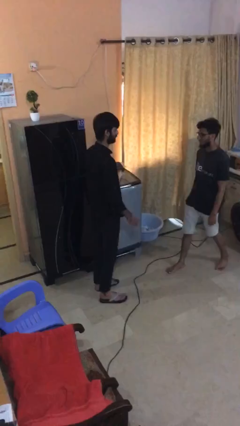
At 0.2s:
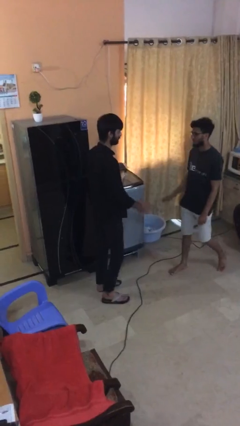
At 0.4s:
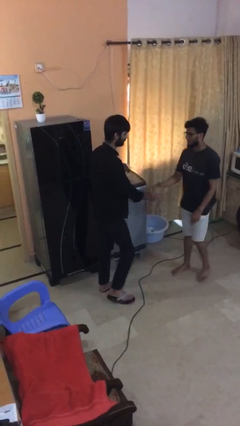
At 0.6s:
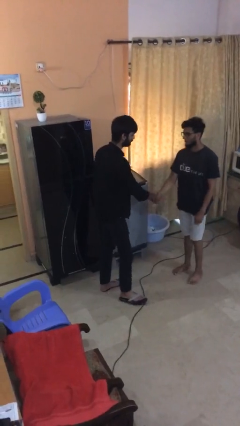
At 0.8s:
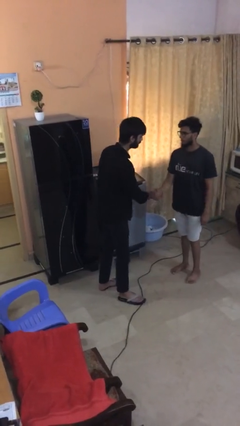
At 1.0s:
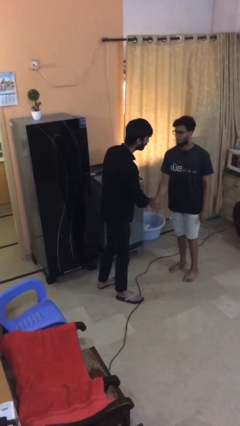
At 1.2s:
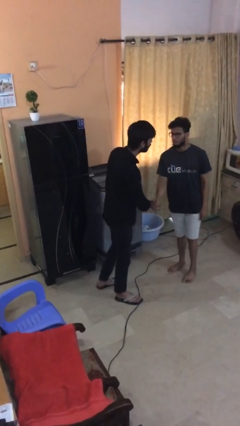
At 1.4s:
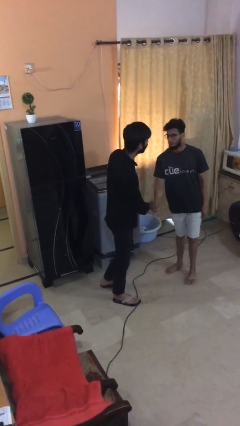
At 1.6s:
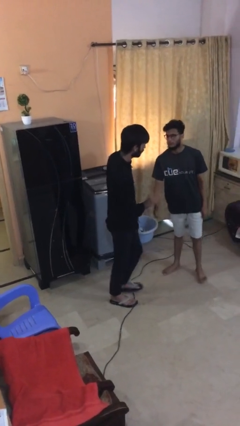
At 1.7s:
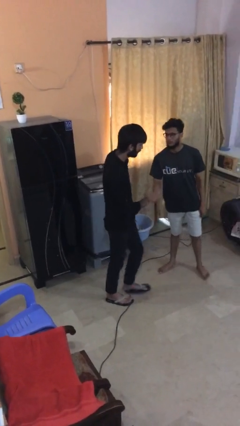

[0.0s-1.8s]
person shakes hand

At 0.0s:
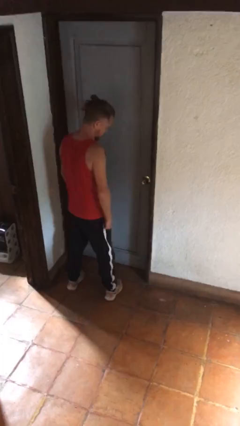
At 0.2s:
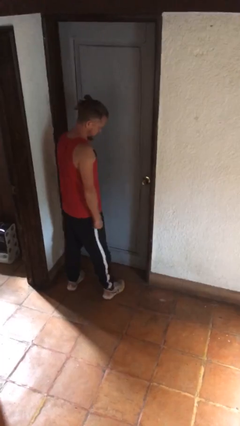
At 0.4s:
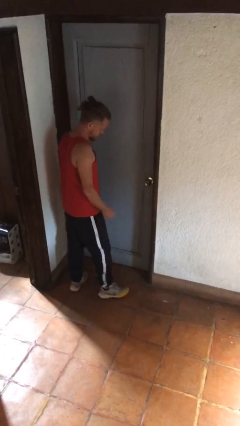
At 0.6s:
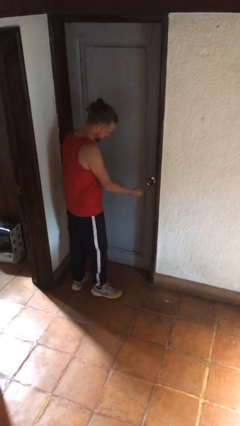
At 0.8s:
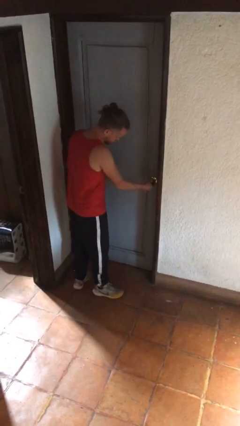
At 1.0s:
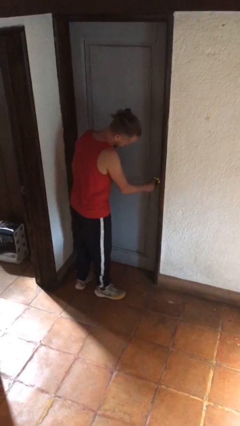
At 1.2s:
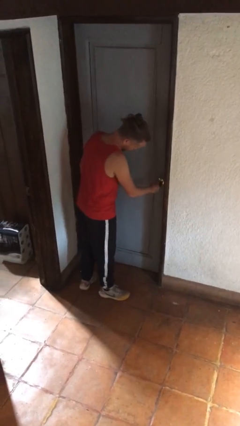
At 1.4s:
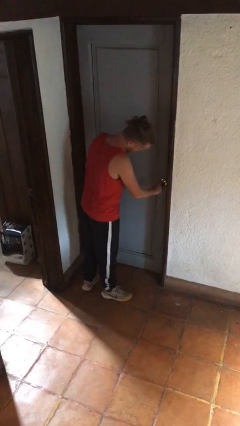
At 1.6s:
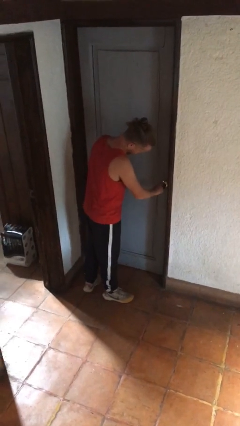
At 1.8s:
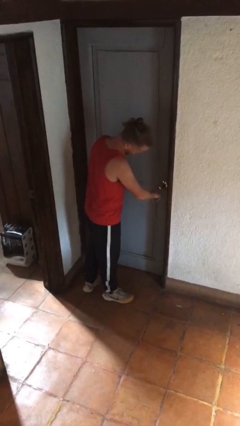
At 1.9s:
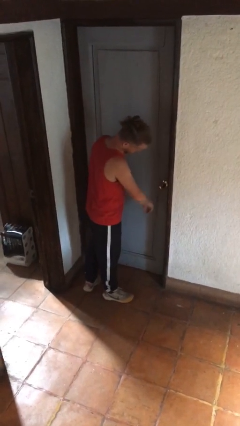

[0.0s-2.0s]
person unlocks door with keys

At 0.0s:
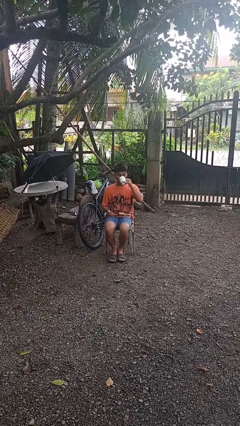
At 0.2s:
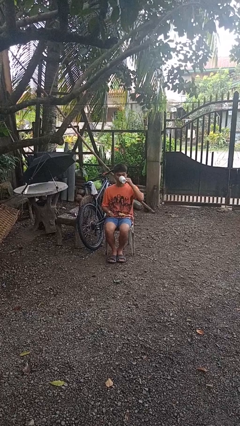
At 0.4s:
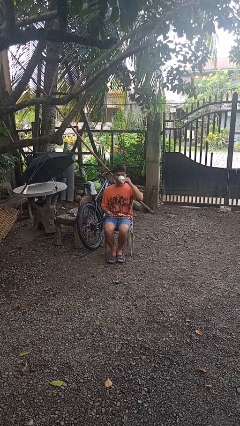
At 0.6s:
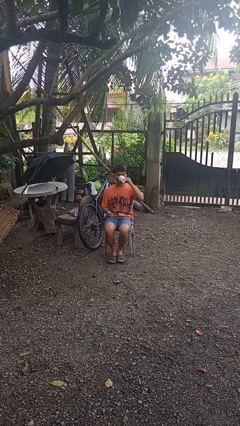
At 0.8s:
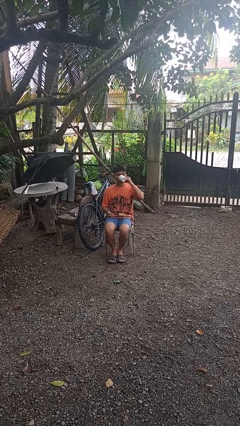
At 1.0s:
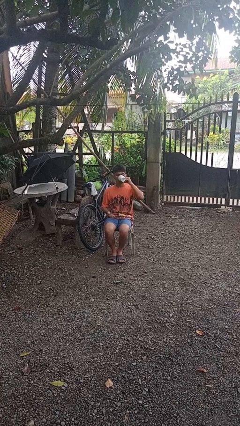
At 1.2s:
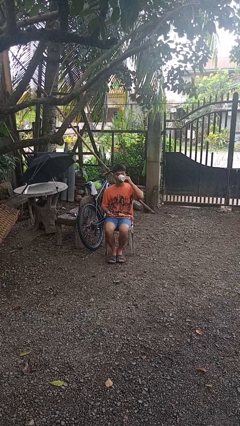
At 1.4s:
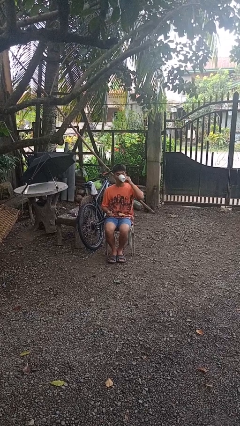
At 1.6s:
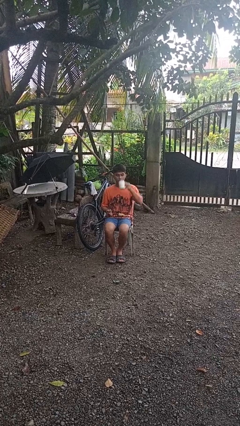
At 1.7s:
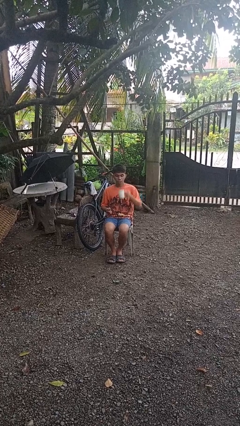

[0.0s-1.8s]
person drinks from mug

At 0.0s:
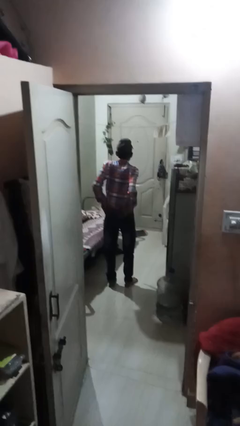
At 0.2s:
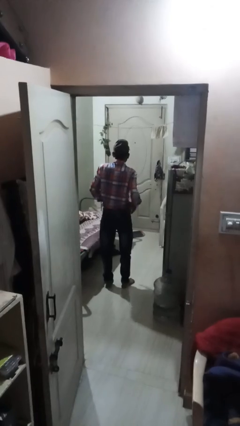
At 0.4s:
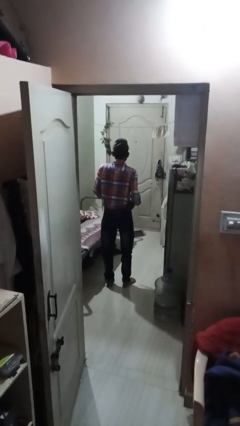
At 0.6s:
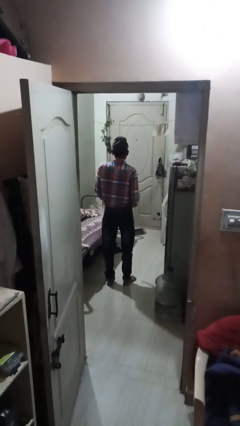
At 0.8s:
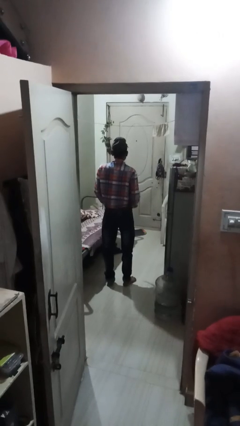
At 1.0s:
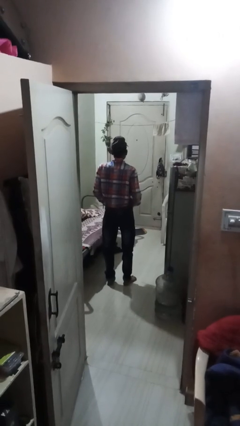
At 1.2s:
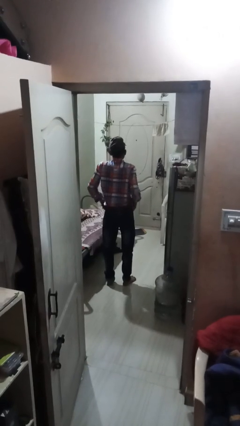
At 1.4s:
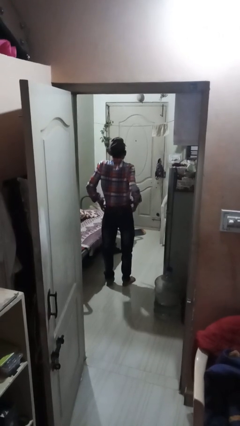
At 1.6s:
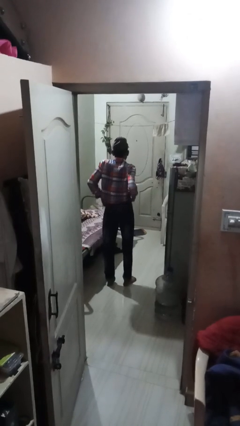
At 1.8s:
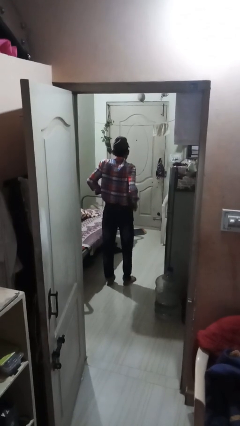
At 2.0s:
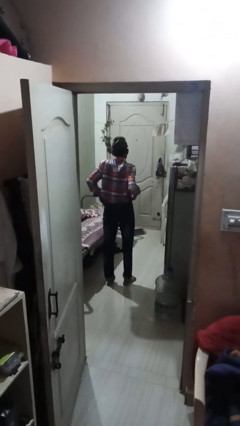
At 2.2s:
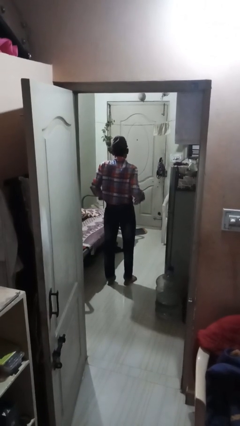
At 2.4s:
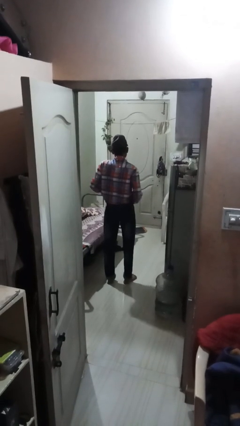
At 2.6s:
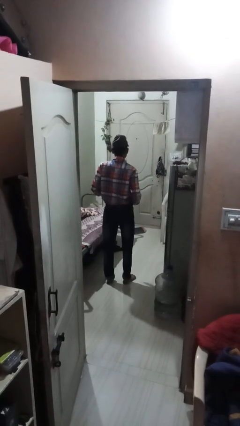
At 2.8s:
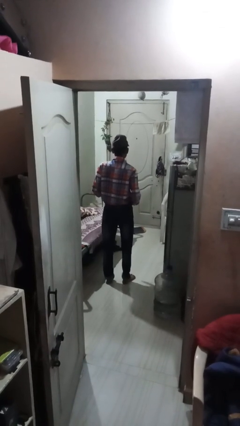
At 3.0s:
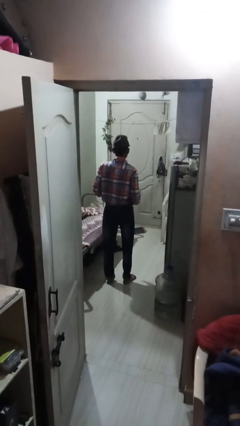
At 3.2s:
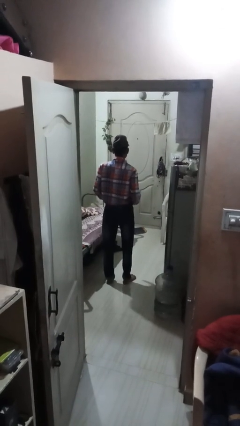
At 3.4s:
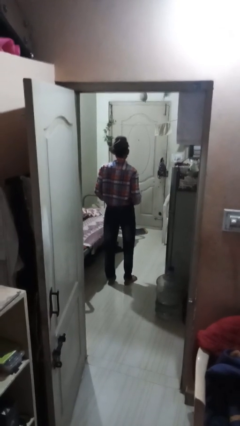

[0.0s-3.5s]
person hikes up pants

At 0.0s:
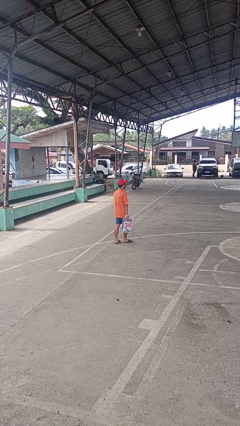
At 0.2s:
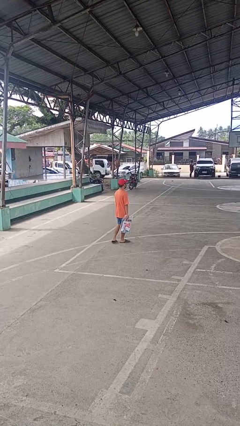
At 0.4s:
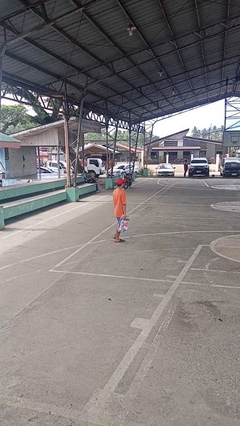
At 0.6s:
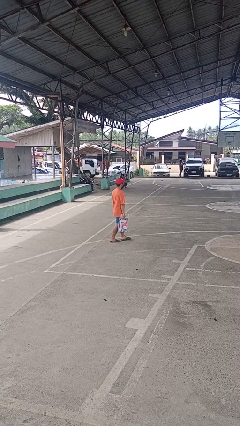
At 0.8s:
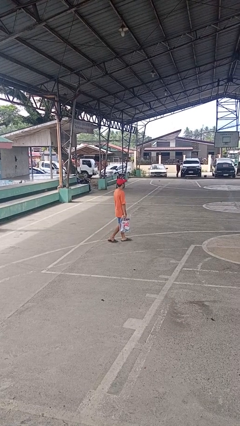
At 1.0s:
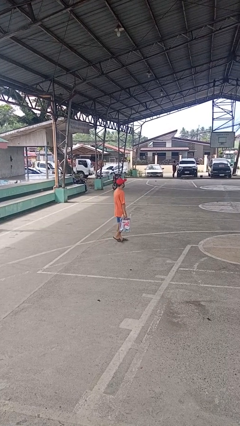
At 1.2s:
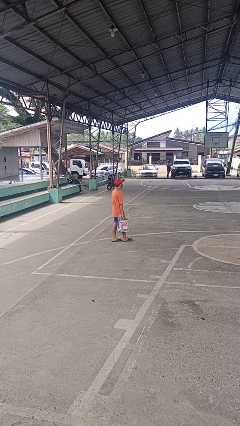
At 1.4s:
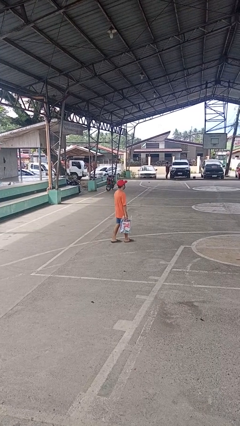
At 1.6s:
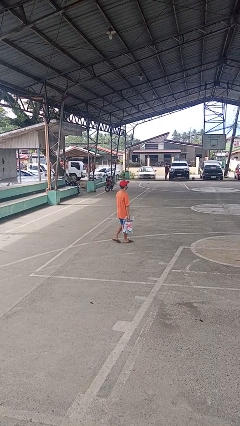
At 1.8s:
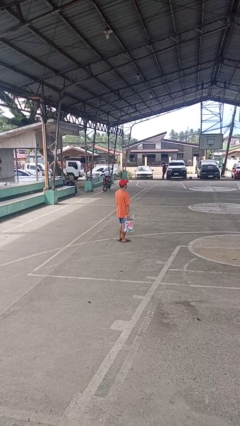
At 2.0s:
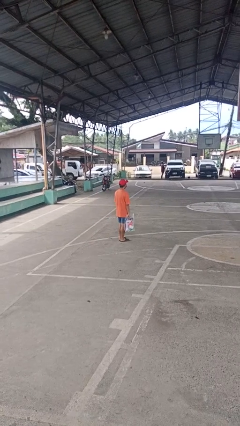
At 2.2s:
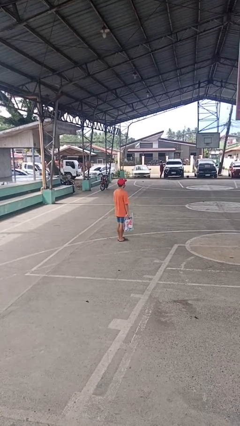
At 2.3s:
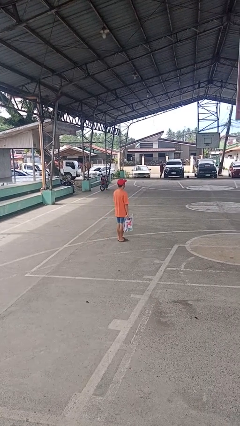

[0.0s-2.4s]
person carries groceries

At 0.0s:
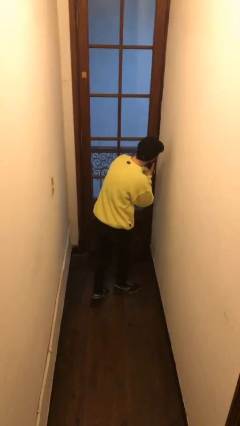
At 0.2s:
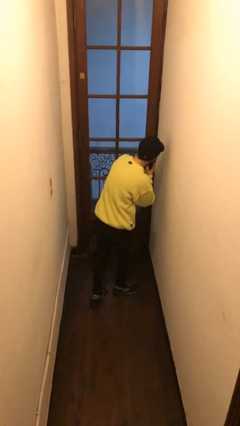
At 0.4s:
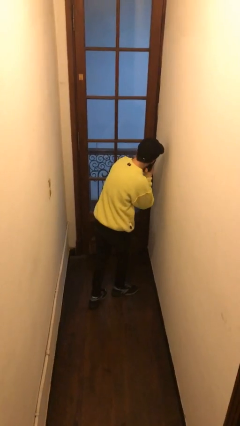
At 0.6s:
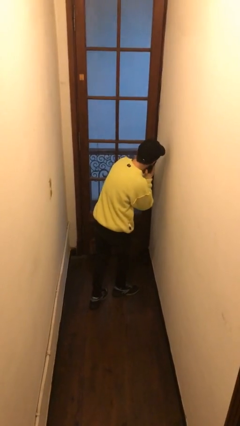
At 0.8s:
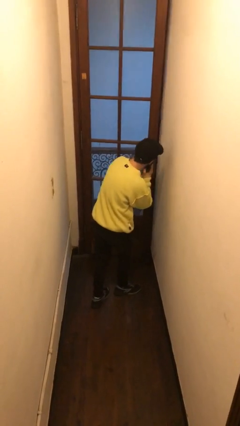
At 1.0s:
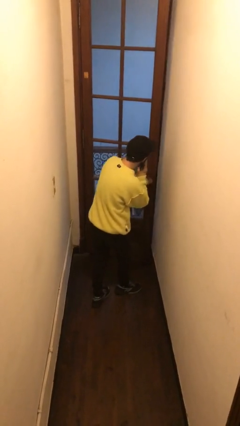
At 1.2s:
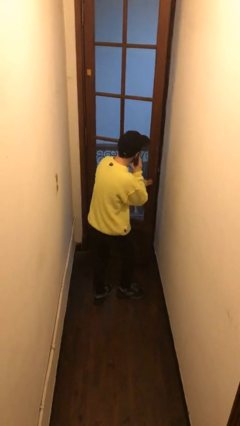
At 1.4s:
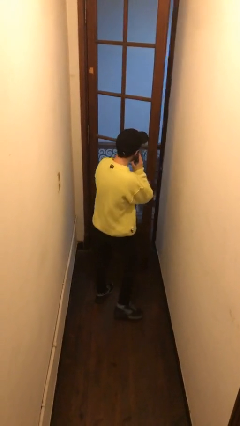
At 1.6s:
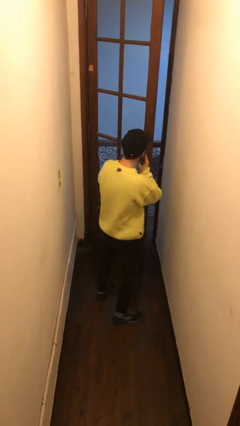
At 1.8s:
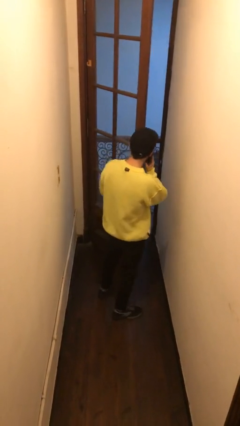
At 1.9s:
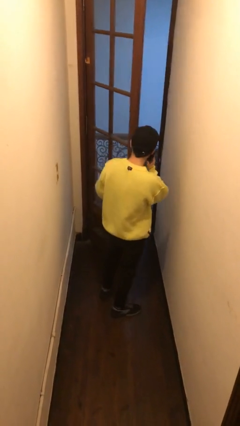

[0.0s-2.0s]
person opens facility door

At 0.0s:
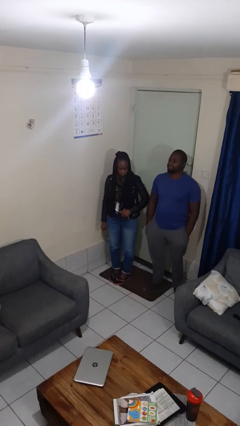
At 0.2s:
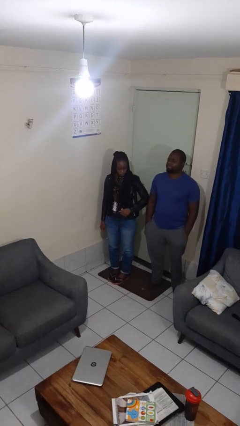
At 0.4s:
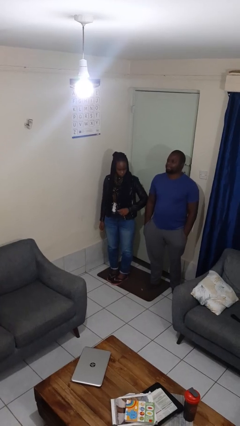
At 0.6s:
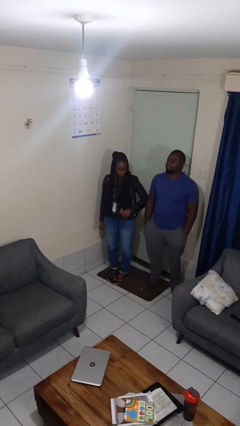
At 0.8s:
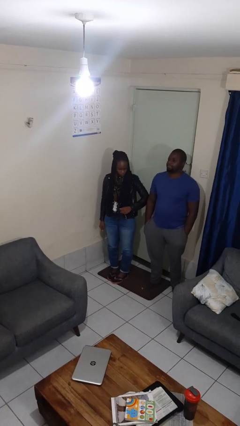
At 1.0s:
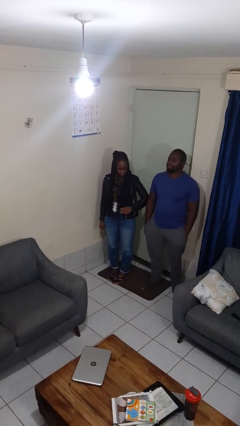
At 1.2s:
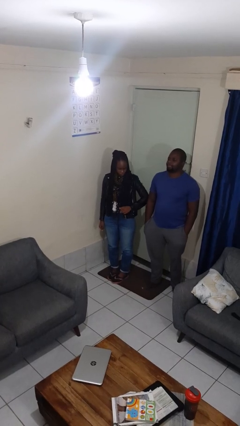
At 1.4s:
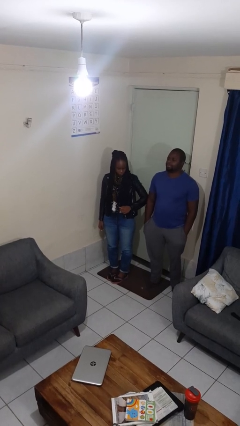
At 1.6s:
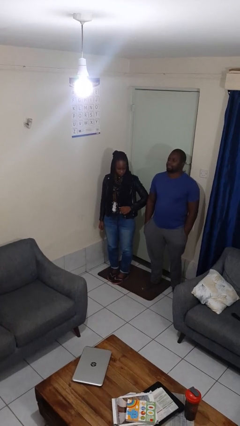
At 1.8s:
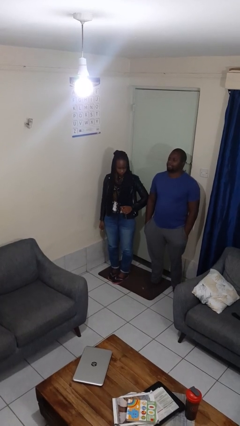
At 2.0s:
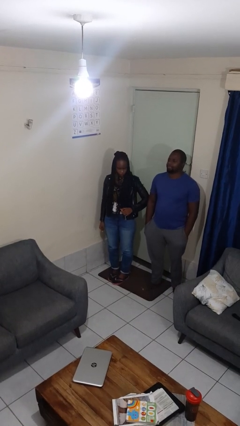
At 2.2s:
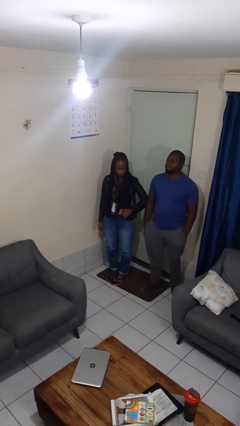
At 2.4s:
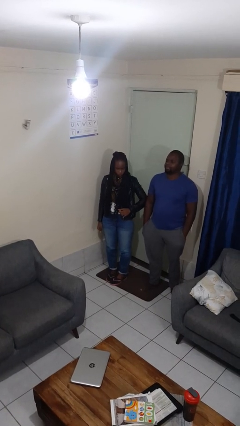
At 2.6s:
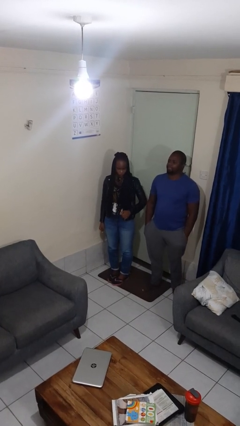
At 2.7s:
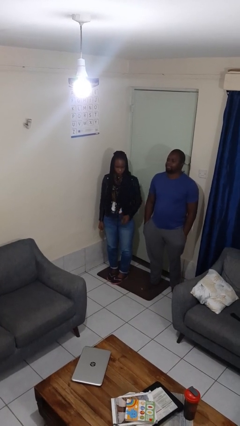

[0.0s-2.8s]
person nudges person with elbow

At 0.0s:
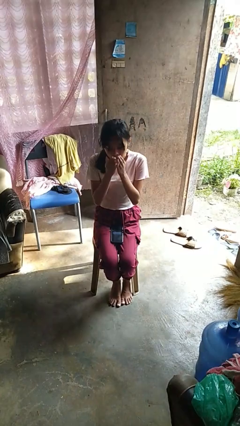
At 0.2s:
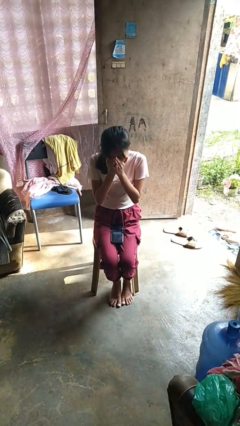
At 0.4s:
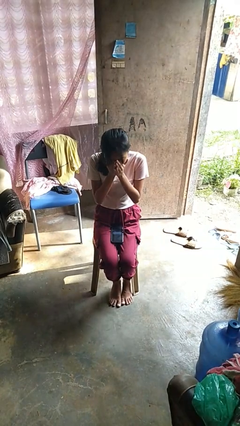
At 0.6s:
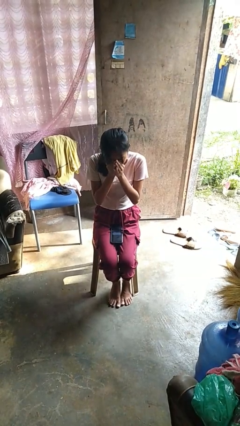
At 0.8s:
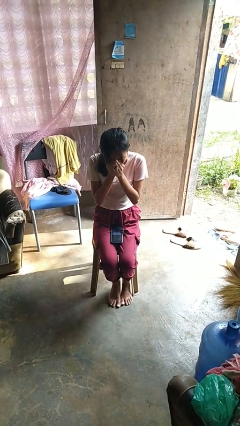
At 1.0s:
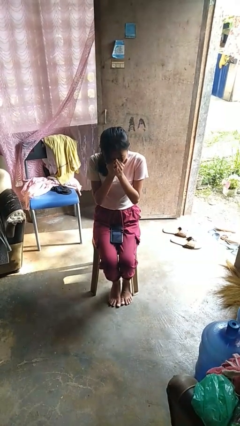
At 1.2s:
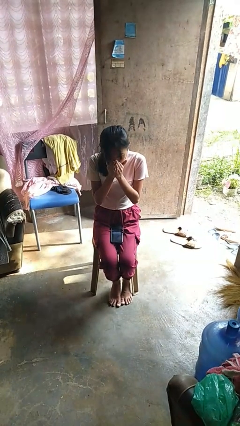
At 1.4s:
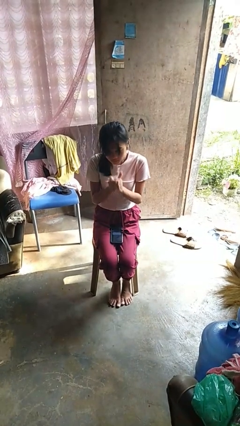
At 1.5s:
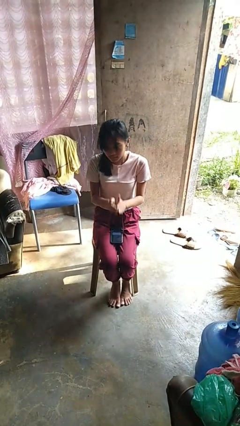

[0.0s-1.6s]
person sneezes into hand
